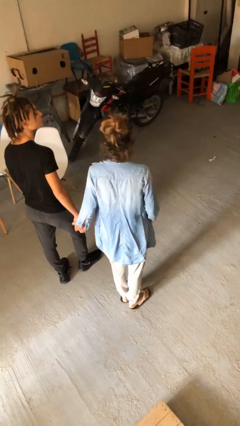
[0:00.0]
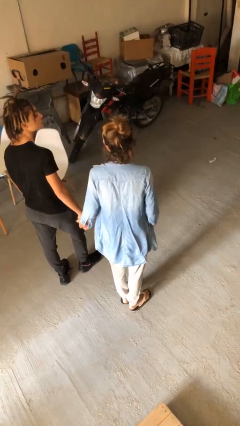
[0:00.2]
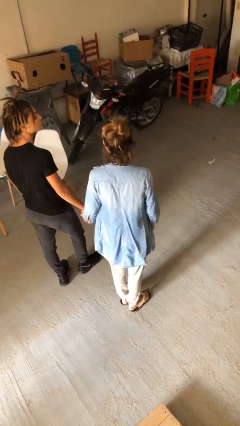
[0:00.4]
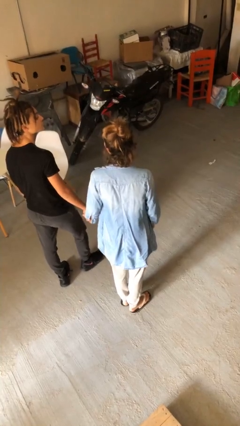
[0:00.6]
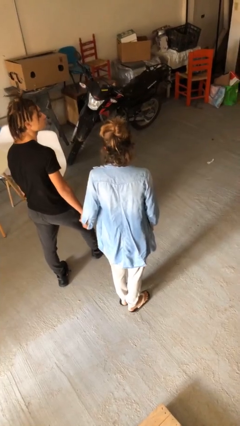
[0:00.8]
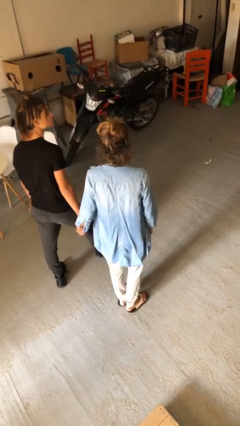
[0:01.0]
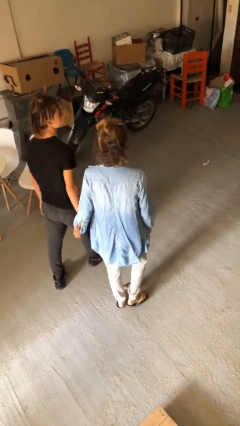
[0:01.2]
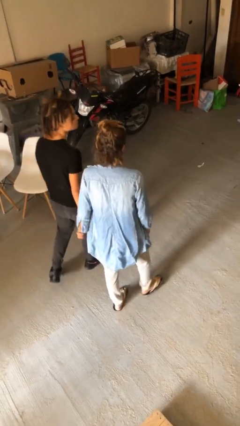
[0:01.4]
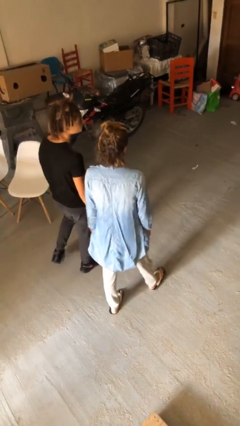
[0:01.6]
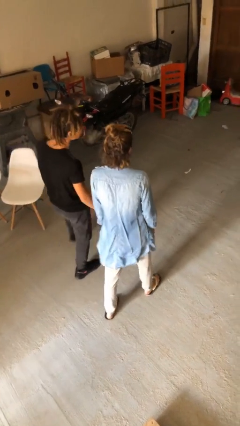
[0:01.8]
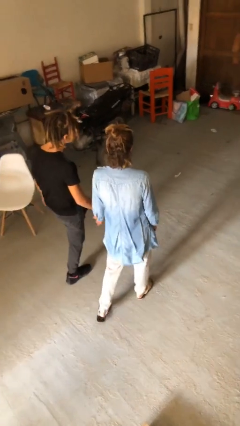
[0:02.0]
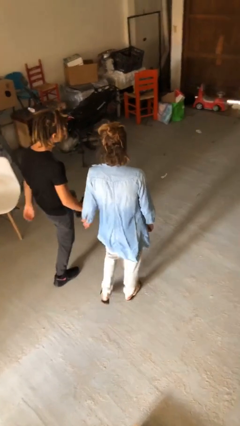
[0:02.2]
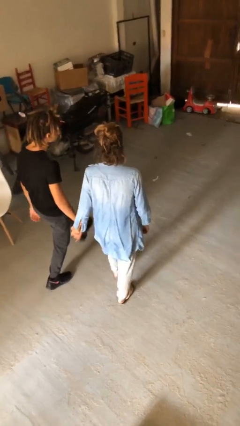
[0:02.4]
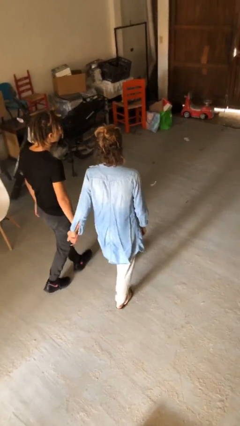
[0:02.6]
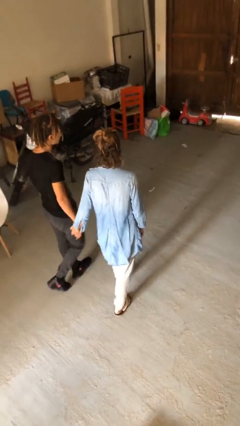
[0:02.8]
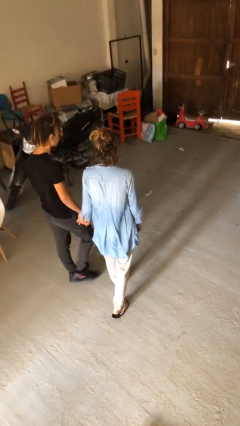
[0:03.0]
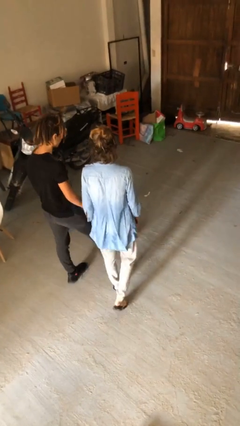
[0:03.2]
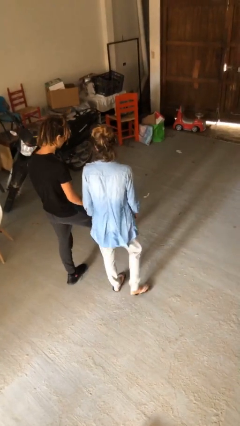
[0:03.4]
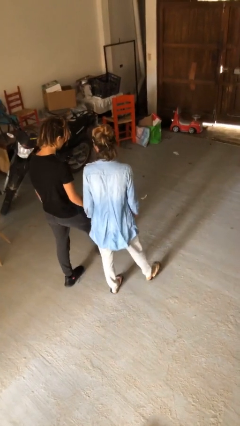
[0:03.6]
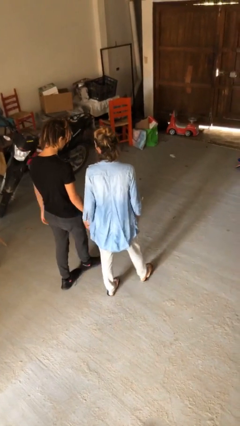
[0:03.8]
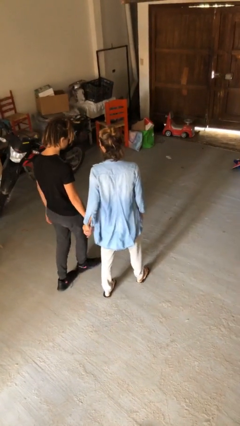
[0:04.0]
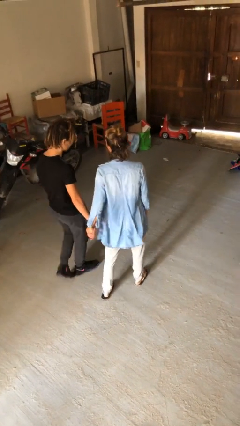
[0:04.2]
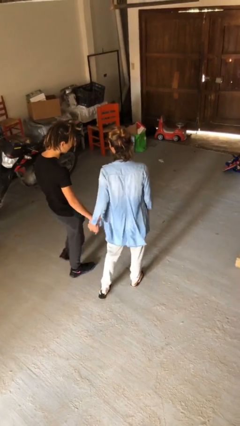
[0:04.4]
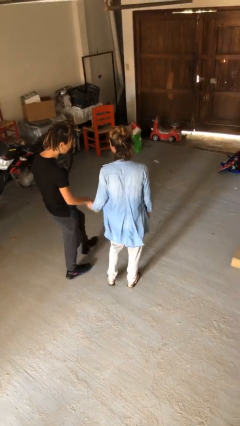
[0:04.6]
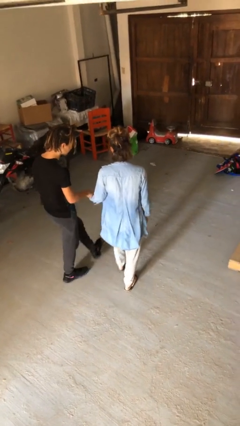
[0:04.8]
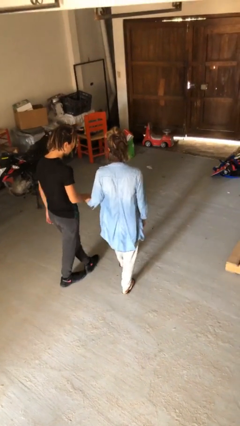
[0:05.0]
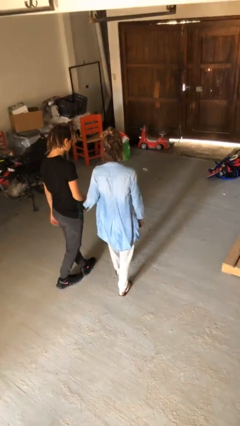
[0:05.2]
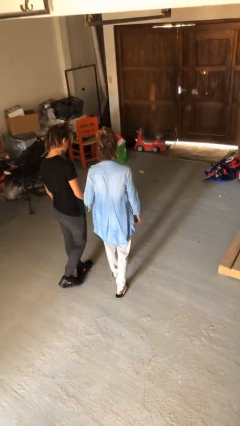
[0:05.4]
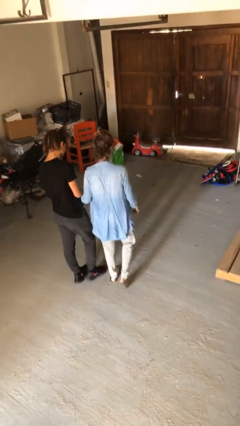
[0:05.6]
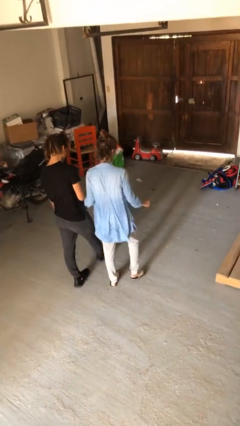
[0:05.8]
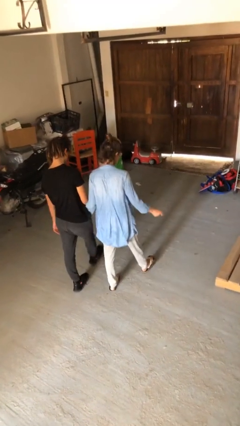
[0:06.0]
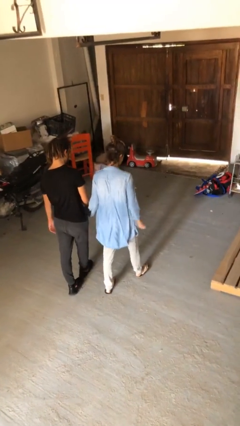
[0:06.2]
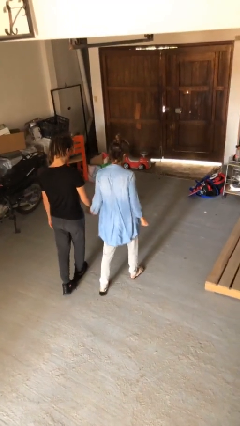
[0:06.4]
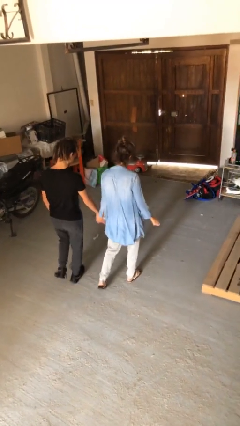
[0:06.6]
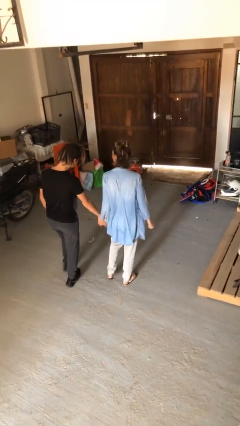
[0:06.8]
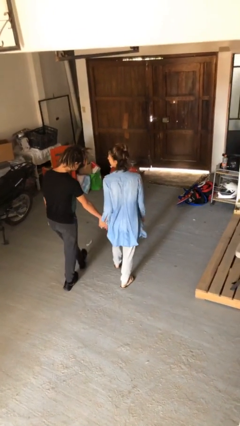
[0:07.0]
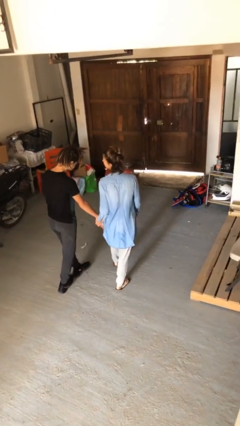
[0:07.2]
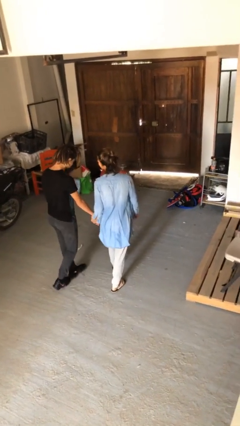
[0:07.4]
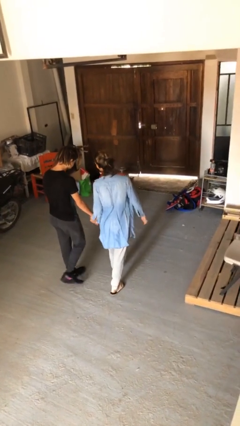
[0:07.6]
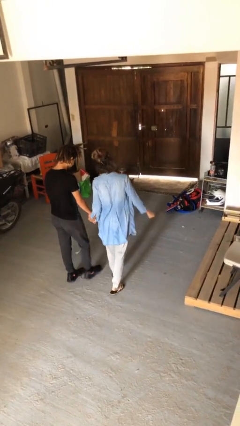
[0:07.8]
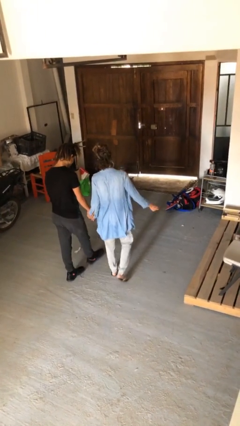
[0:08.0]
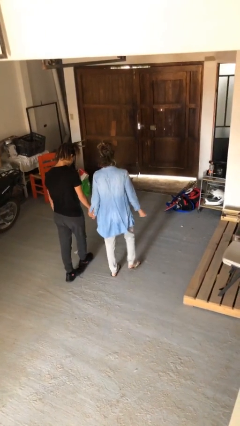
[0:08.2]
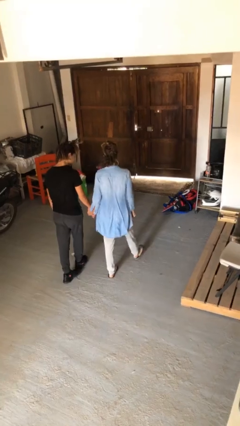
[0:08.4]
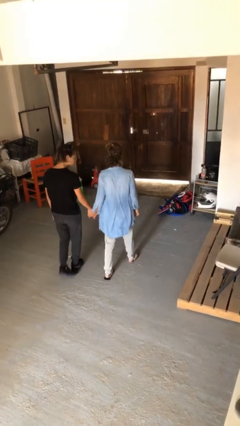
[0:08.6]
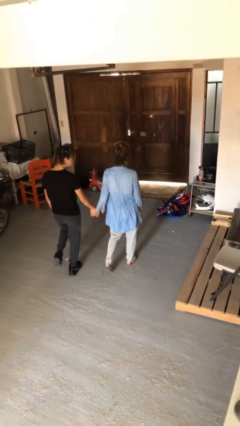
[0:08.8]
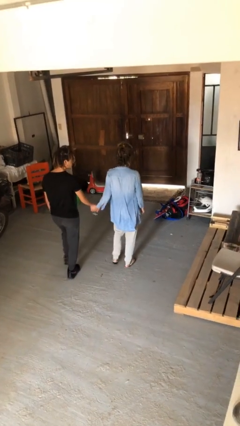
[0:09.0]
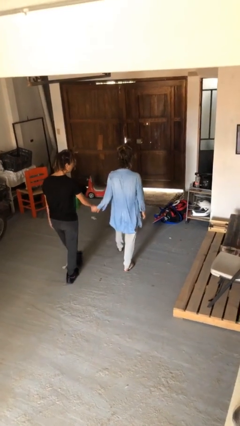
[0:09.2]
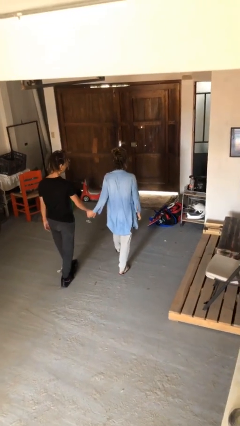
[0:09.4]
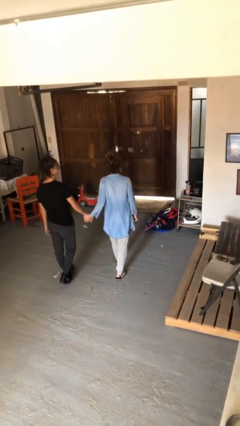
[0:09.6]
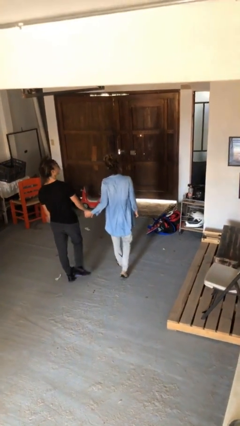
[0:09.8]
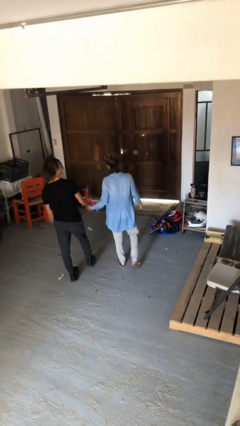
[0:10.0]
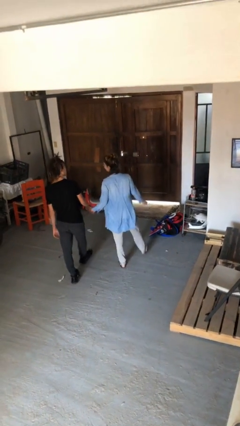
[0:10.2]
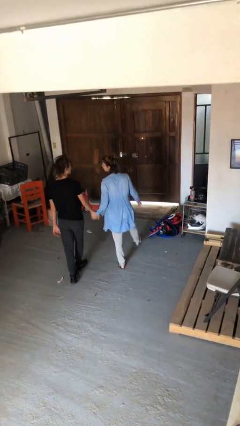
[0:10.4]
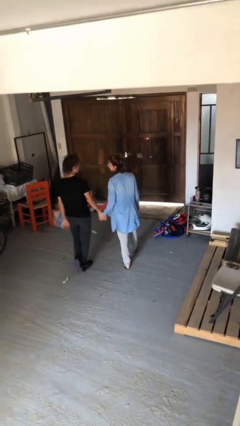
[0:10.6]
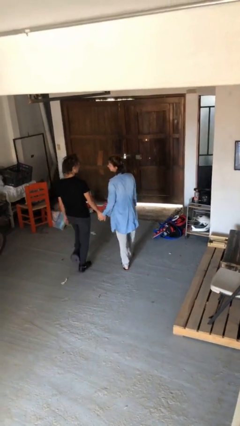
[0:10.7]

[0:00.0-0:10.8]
person holds hand

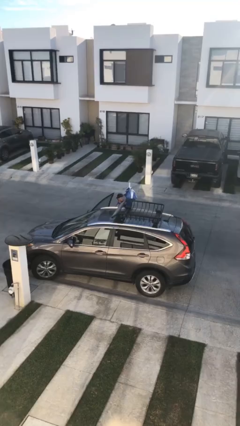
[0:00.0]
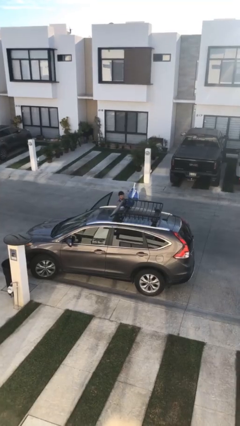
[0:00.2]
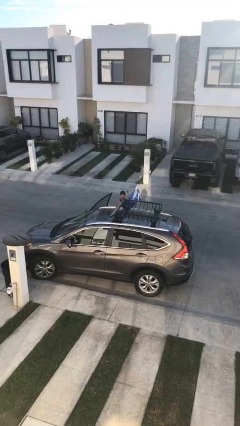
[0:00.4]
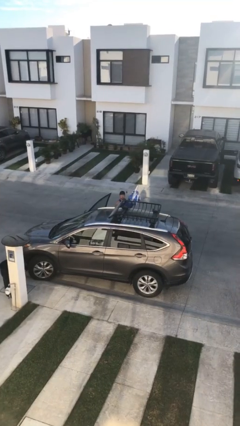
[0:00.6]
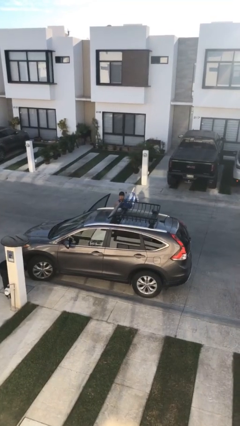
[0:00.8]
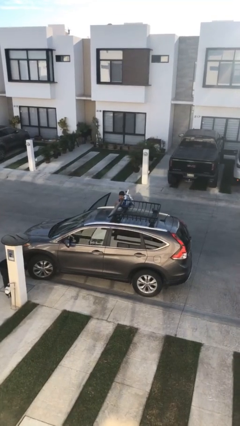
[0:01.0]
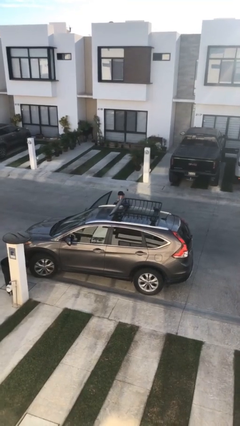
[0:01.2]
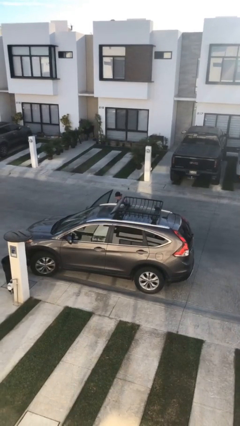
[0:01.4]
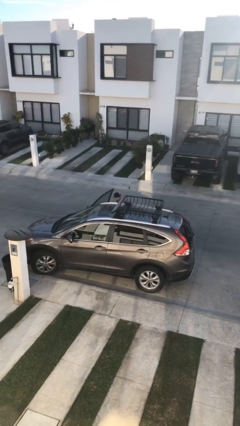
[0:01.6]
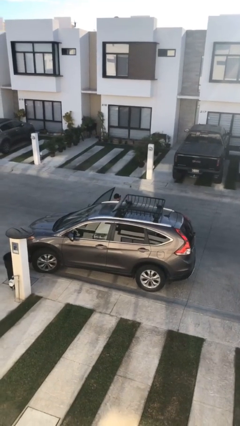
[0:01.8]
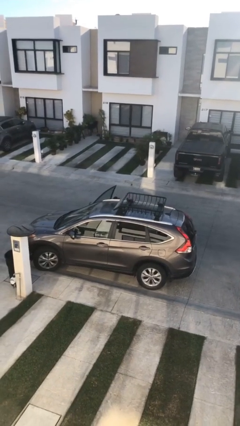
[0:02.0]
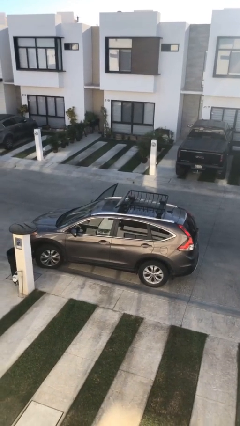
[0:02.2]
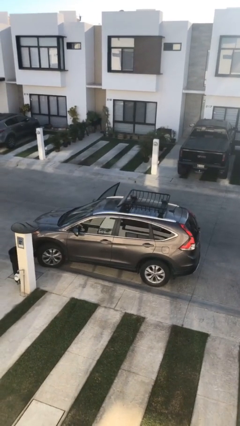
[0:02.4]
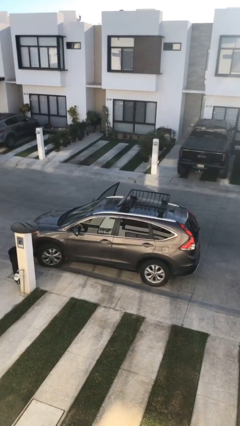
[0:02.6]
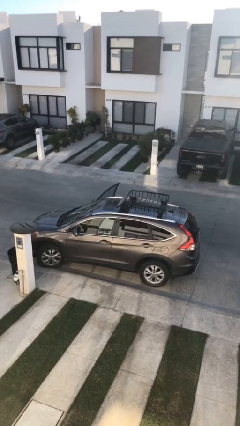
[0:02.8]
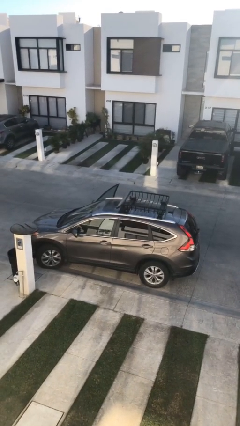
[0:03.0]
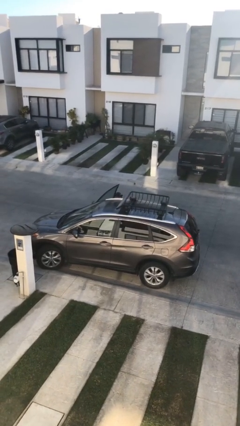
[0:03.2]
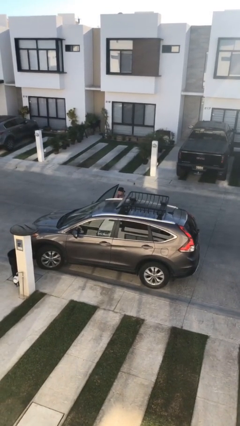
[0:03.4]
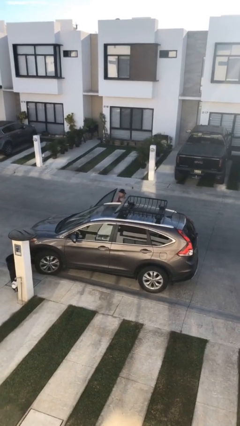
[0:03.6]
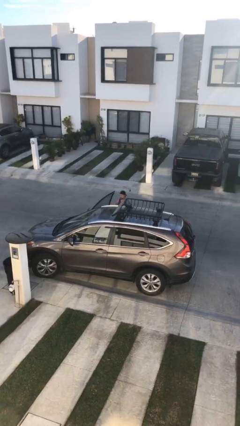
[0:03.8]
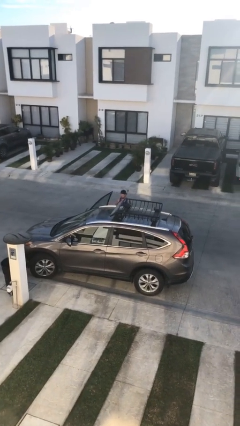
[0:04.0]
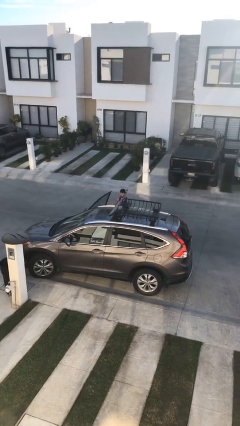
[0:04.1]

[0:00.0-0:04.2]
person loads car

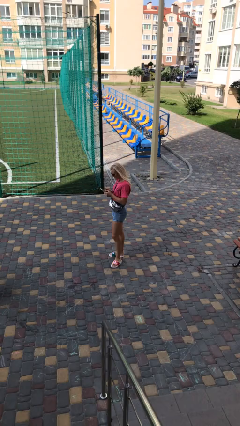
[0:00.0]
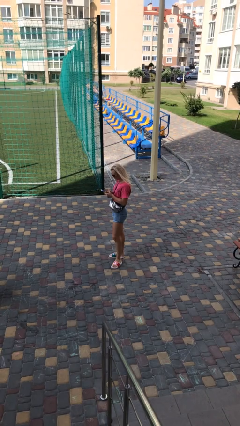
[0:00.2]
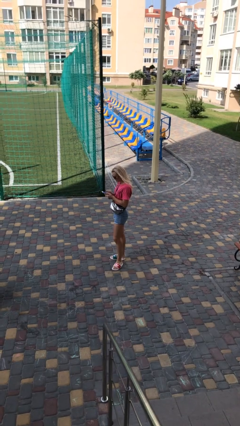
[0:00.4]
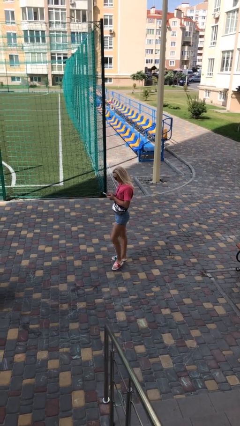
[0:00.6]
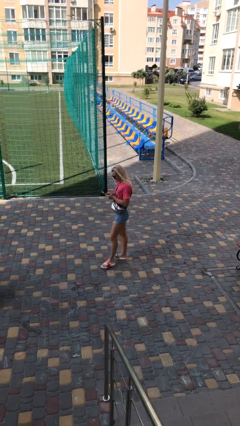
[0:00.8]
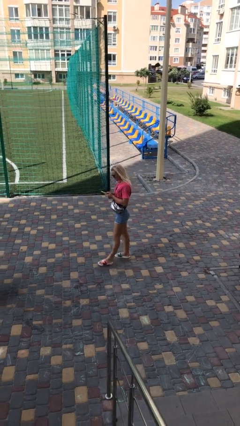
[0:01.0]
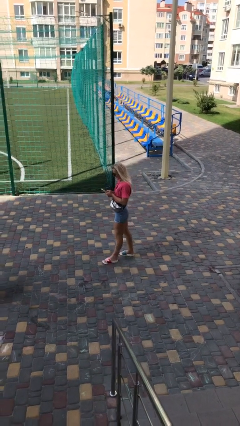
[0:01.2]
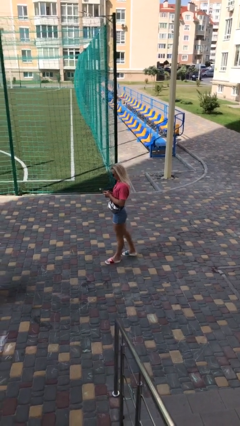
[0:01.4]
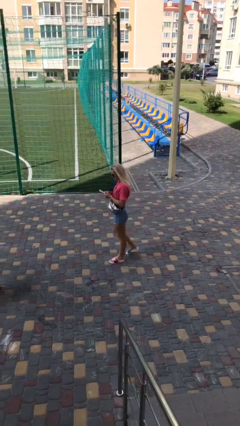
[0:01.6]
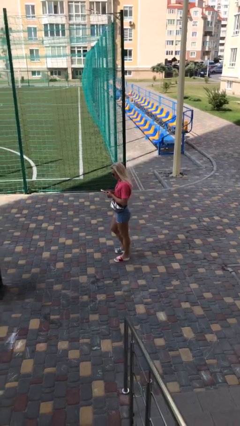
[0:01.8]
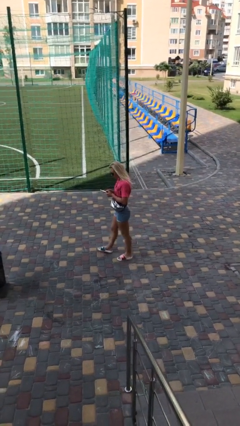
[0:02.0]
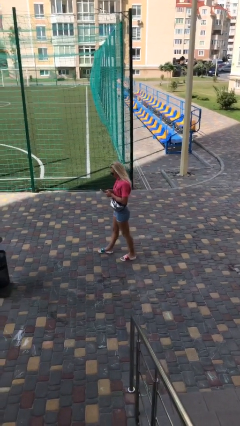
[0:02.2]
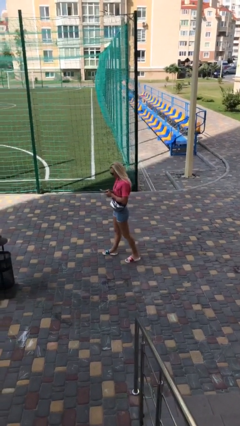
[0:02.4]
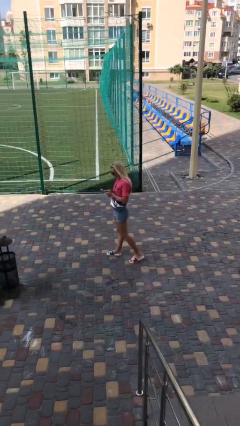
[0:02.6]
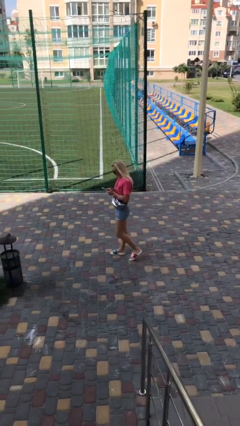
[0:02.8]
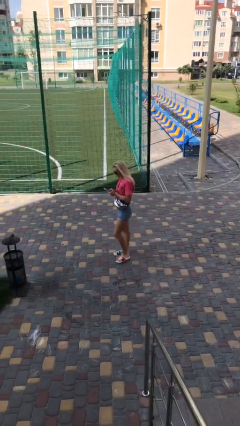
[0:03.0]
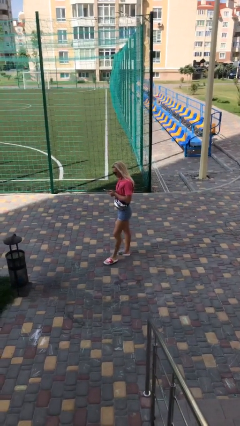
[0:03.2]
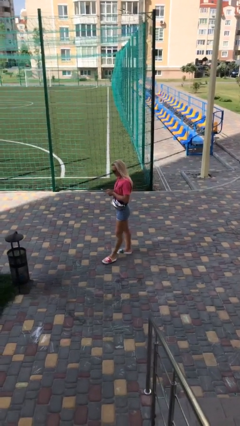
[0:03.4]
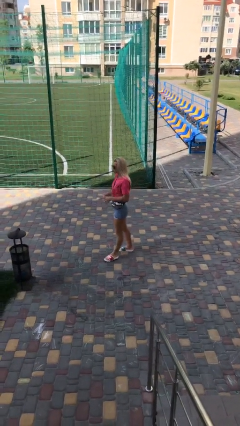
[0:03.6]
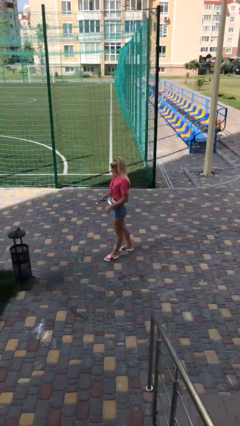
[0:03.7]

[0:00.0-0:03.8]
person texts on phone
